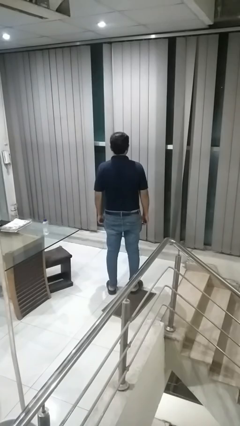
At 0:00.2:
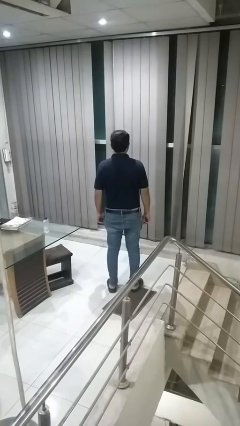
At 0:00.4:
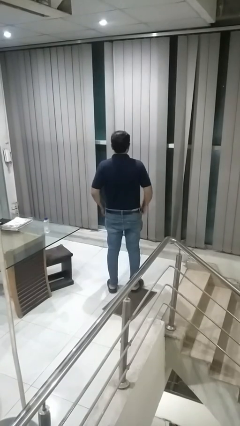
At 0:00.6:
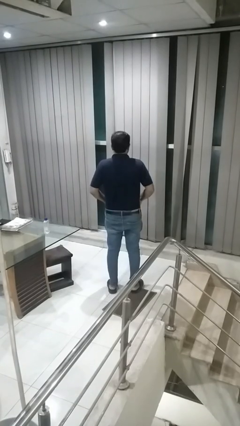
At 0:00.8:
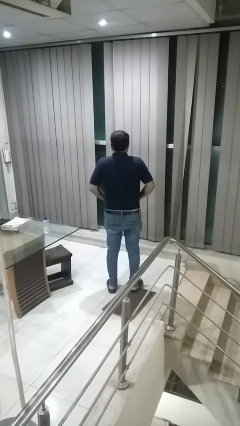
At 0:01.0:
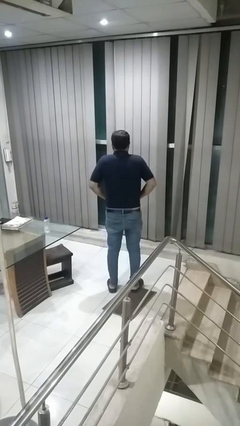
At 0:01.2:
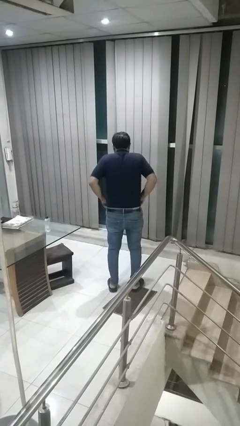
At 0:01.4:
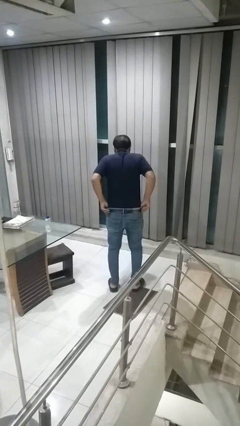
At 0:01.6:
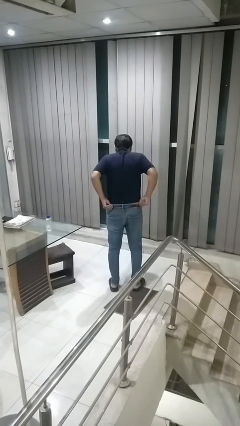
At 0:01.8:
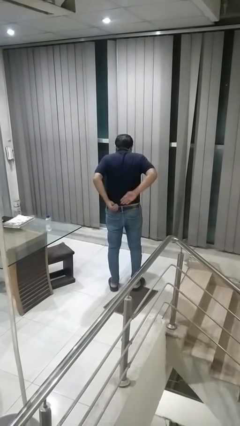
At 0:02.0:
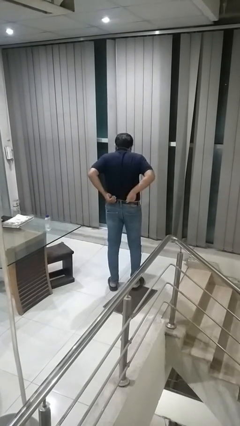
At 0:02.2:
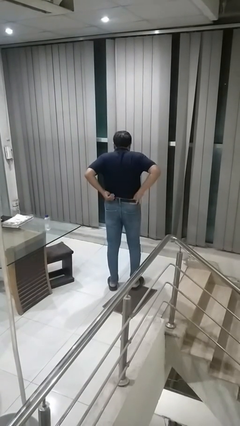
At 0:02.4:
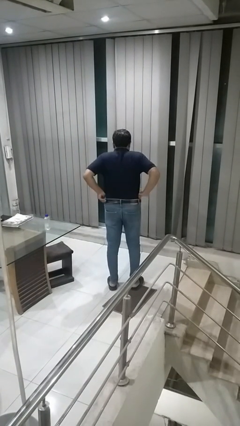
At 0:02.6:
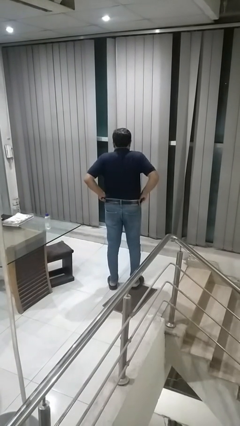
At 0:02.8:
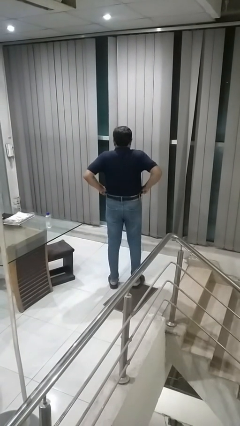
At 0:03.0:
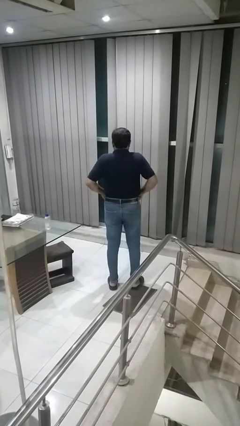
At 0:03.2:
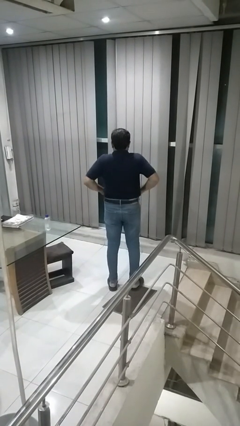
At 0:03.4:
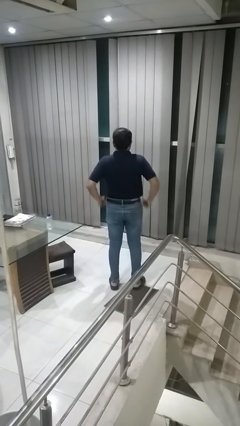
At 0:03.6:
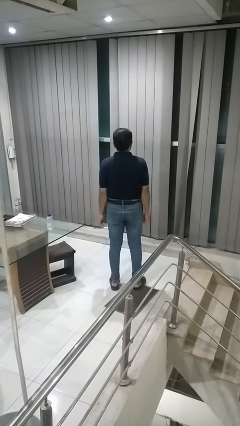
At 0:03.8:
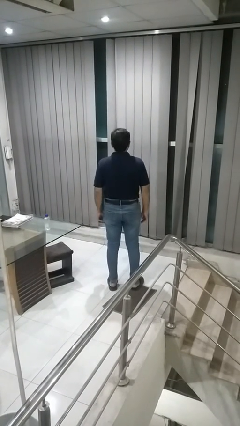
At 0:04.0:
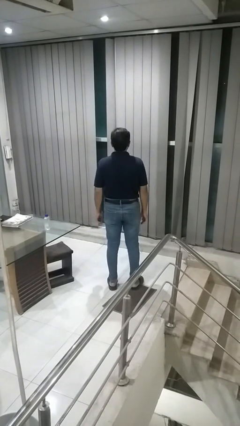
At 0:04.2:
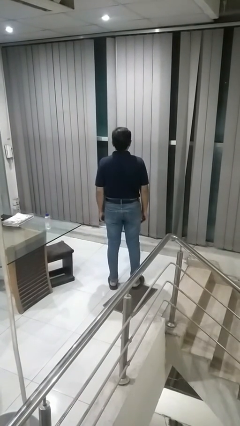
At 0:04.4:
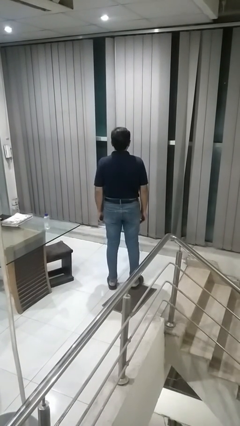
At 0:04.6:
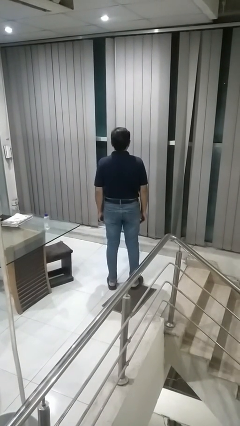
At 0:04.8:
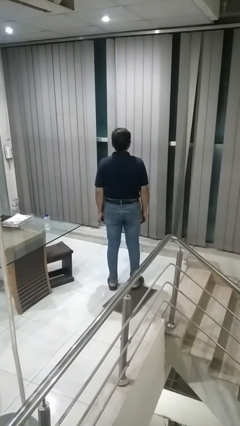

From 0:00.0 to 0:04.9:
person hikes up pants

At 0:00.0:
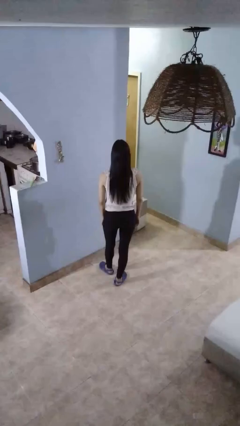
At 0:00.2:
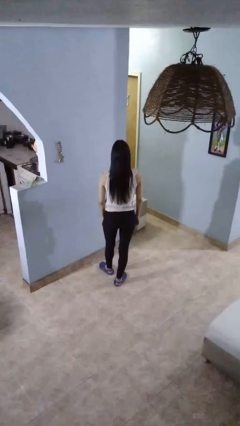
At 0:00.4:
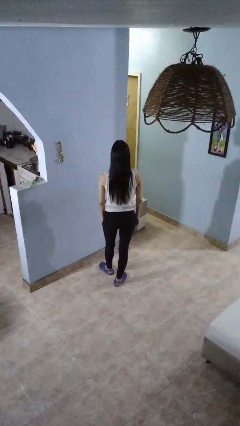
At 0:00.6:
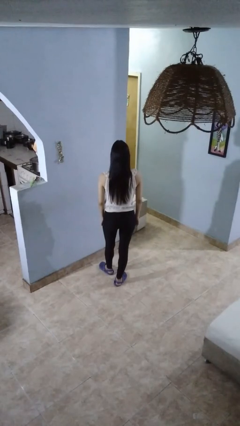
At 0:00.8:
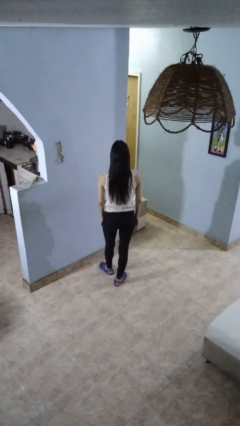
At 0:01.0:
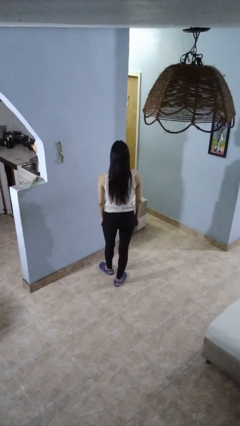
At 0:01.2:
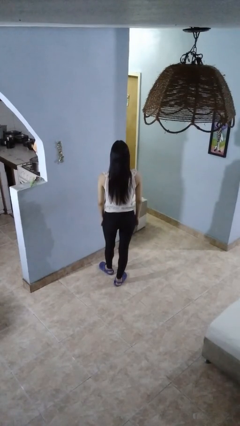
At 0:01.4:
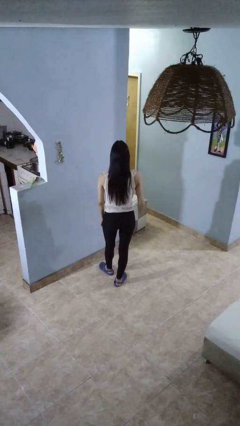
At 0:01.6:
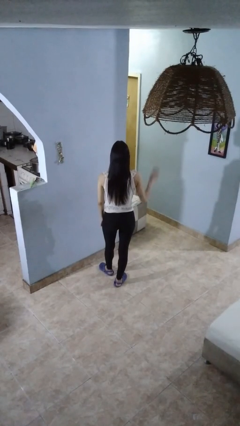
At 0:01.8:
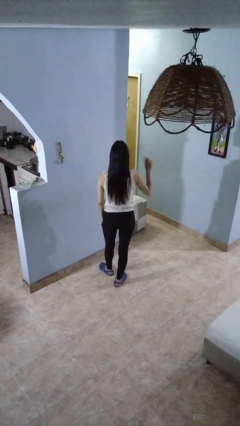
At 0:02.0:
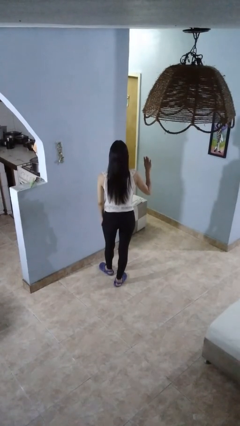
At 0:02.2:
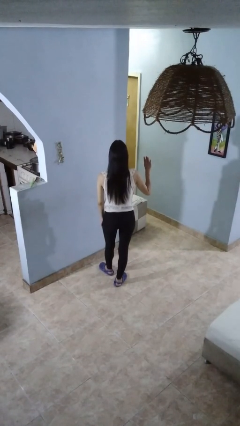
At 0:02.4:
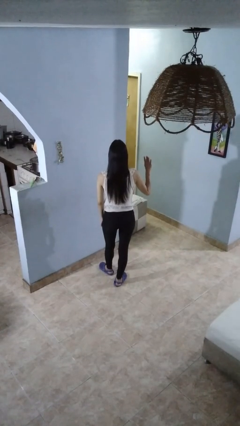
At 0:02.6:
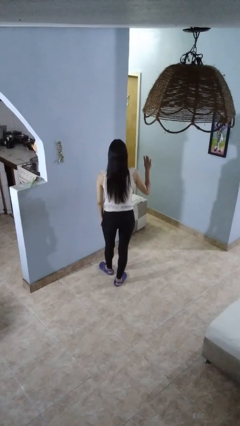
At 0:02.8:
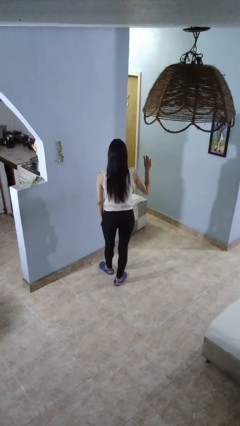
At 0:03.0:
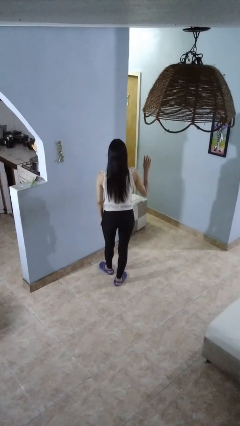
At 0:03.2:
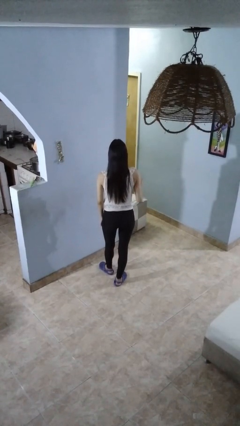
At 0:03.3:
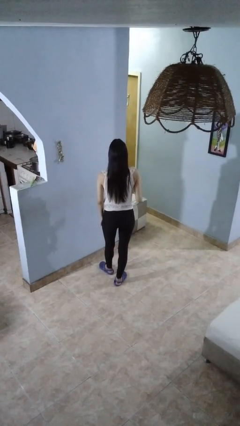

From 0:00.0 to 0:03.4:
person gestures number four

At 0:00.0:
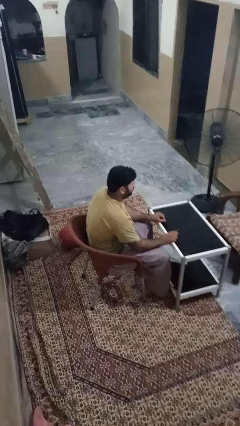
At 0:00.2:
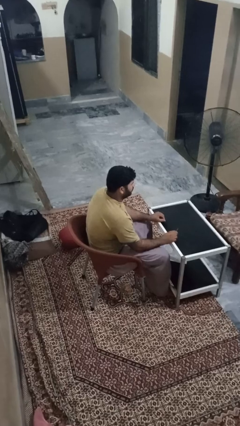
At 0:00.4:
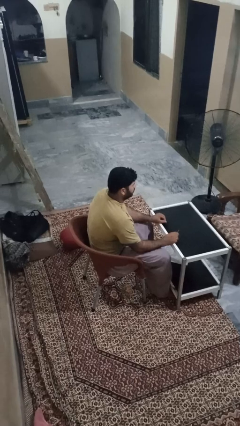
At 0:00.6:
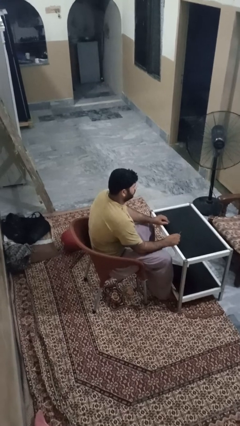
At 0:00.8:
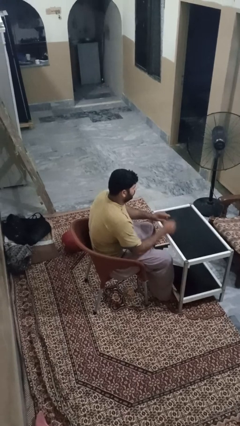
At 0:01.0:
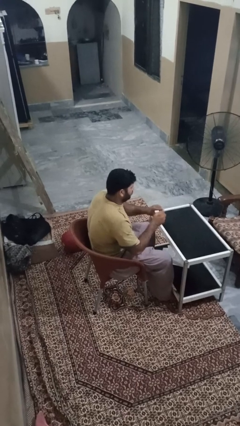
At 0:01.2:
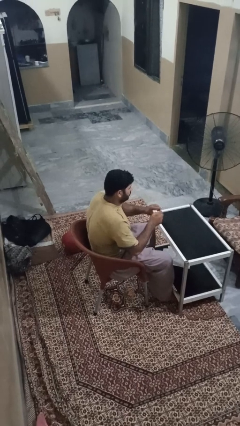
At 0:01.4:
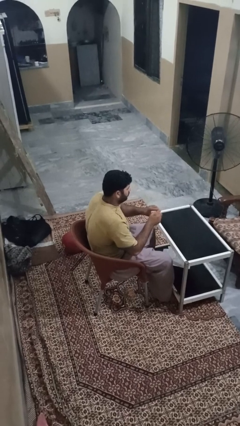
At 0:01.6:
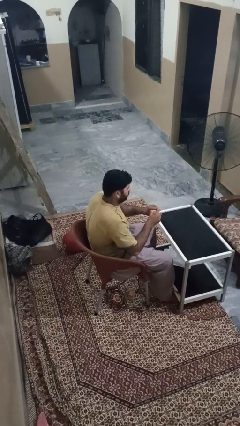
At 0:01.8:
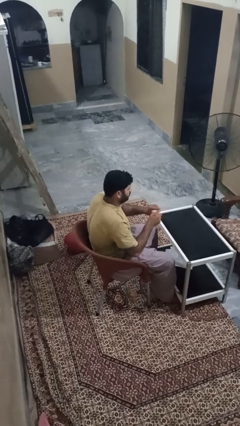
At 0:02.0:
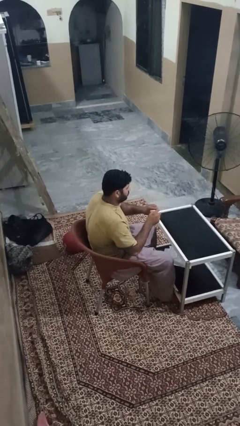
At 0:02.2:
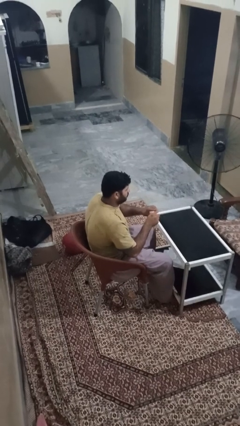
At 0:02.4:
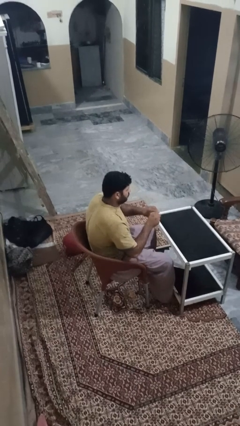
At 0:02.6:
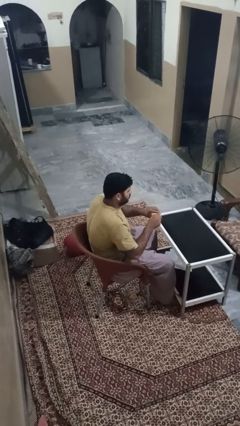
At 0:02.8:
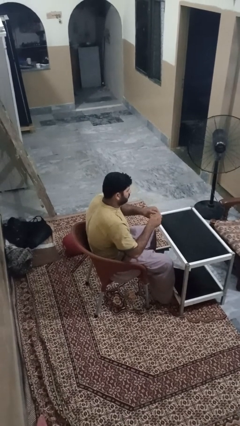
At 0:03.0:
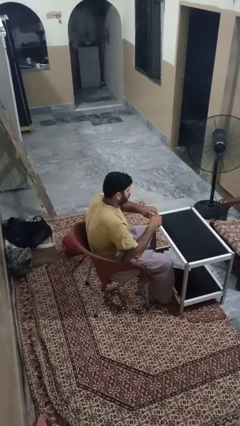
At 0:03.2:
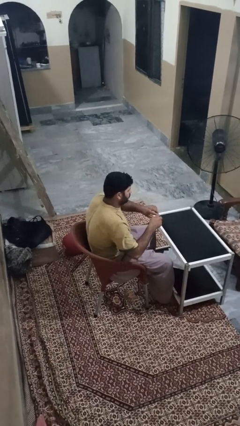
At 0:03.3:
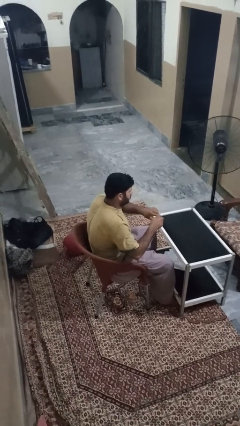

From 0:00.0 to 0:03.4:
person files fingernails

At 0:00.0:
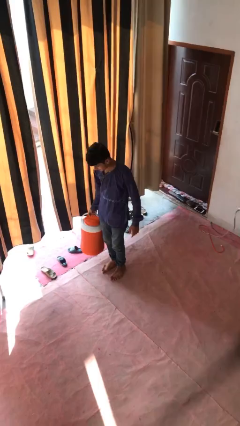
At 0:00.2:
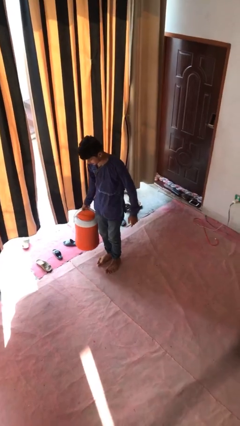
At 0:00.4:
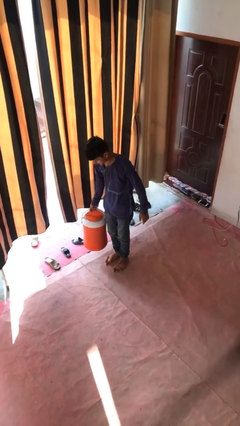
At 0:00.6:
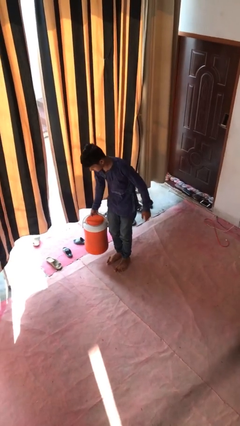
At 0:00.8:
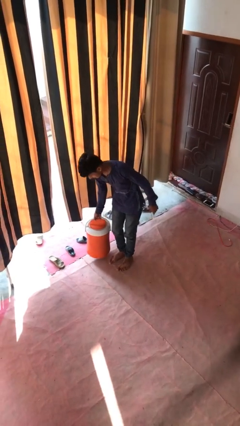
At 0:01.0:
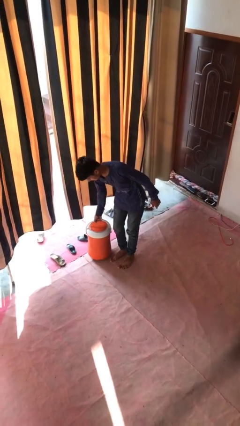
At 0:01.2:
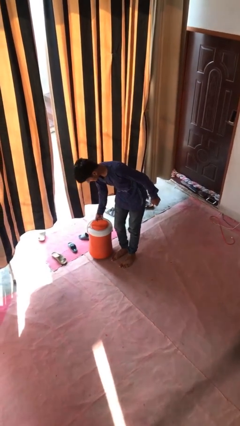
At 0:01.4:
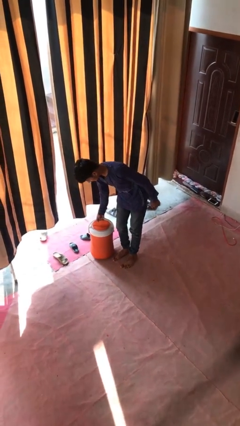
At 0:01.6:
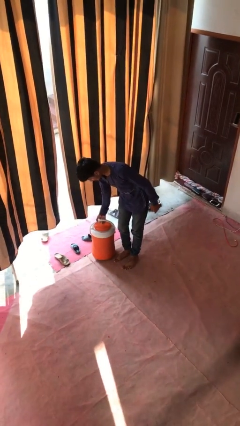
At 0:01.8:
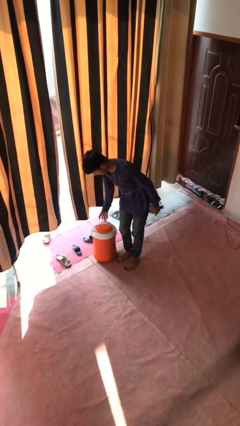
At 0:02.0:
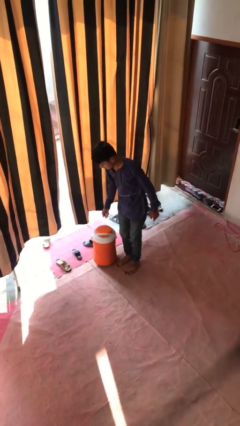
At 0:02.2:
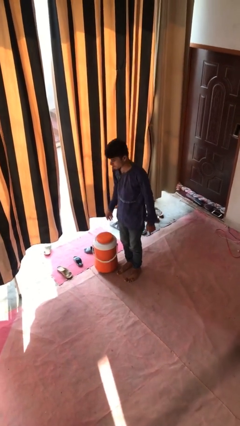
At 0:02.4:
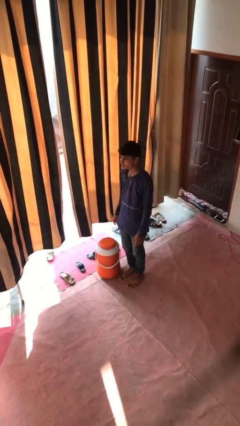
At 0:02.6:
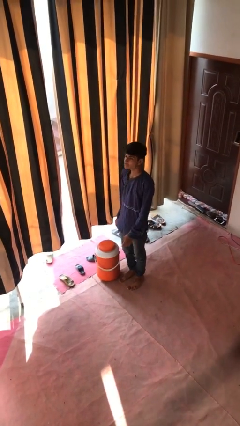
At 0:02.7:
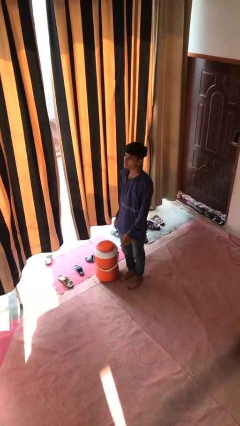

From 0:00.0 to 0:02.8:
person puts down object on floor

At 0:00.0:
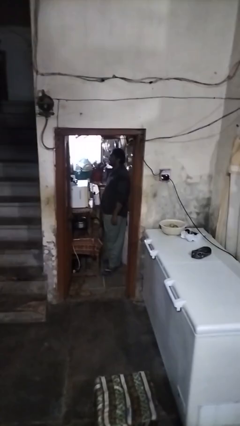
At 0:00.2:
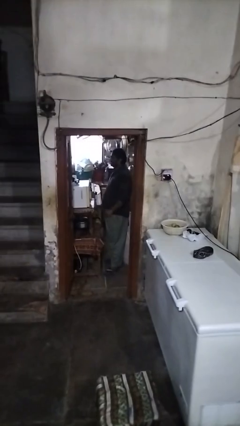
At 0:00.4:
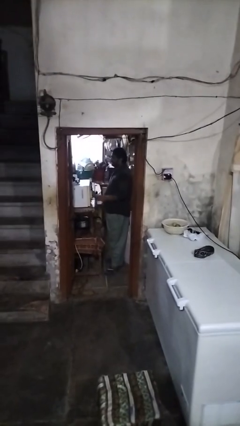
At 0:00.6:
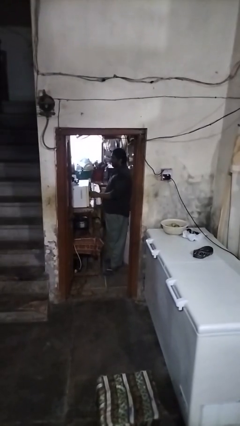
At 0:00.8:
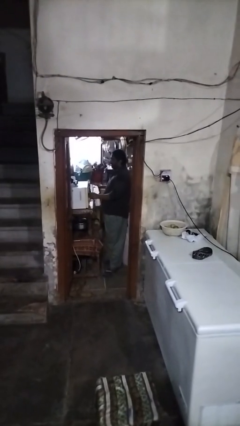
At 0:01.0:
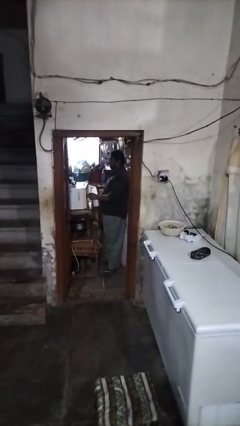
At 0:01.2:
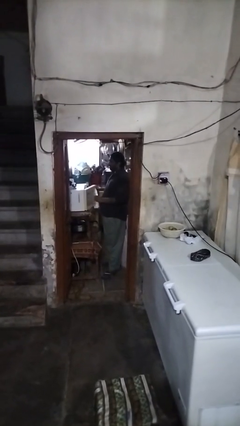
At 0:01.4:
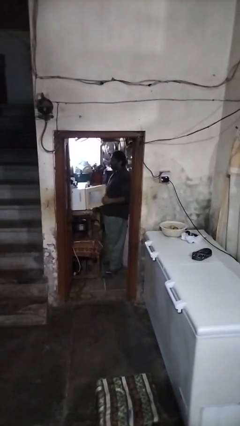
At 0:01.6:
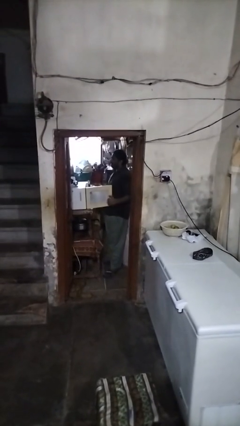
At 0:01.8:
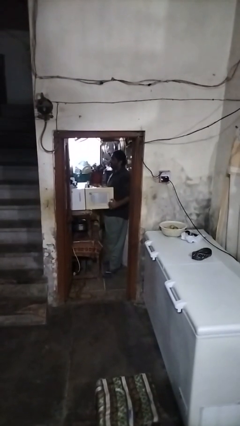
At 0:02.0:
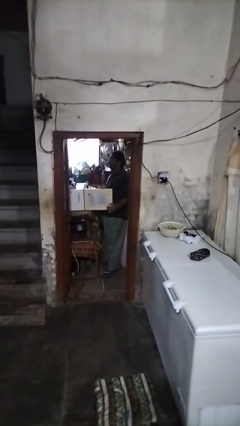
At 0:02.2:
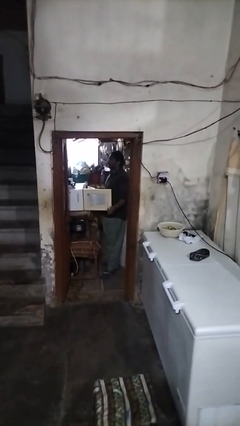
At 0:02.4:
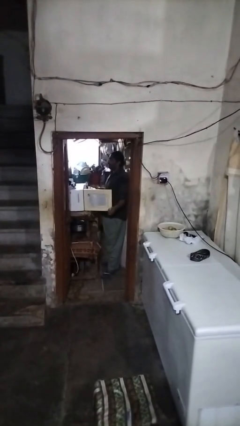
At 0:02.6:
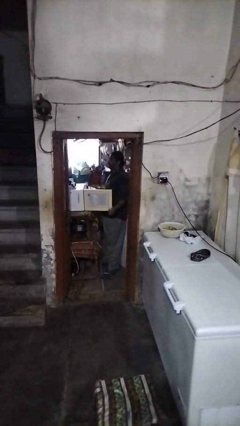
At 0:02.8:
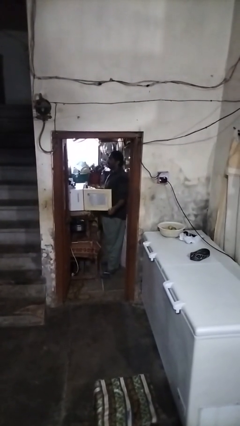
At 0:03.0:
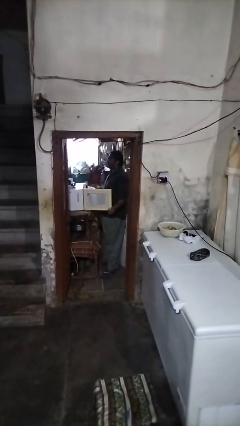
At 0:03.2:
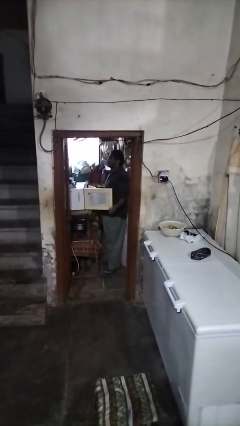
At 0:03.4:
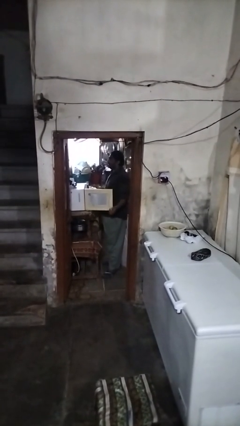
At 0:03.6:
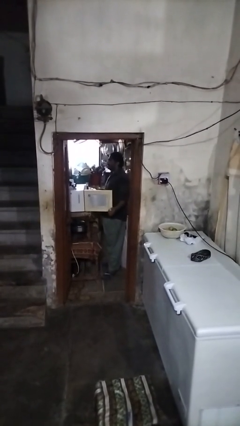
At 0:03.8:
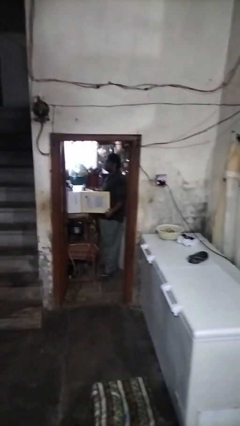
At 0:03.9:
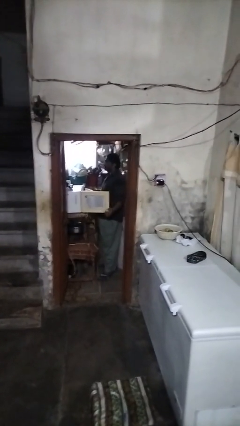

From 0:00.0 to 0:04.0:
person opens oven door
